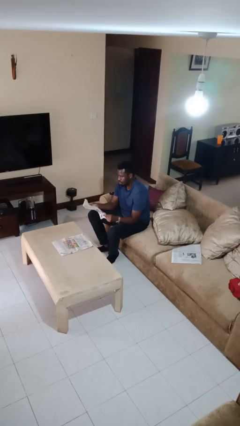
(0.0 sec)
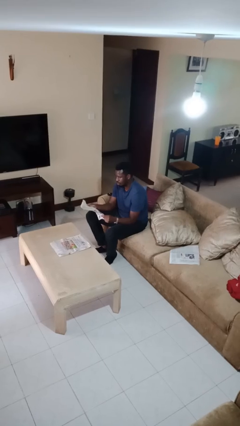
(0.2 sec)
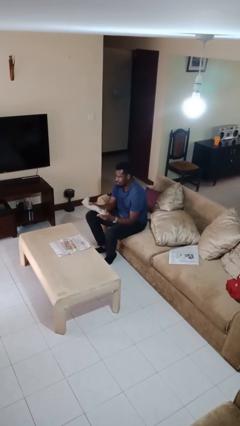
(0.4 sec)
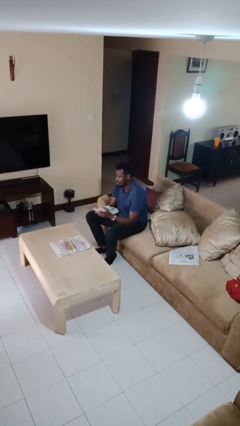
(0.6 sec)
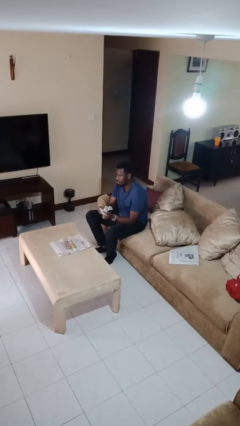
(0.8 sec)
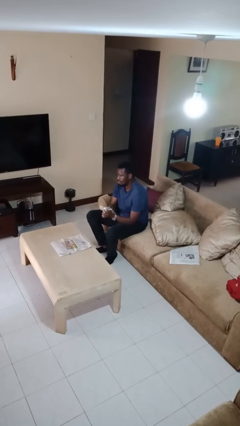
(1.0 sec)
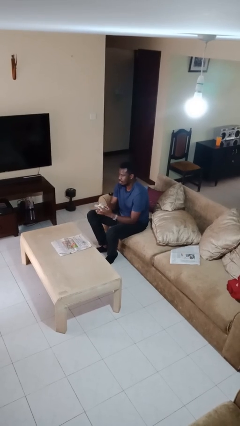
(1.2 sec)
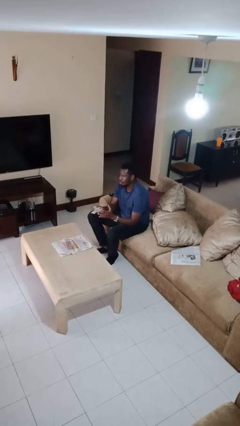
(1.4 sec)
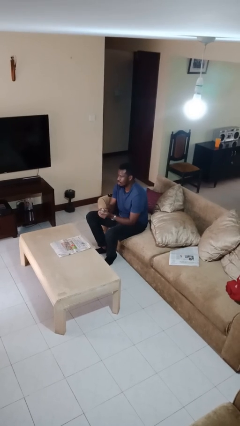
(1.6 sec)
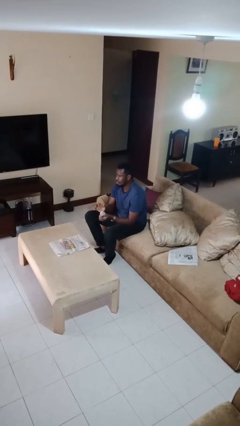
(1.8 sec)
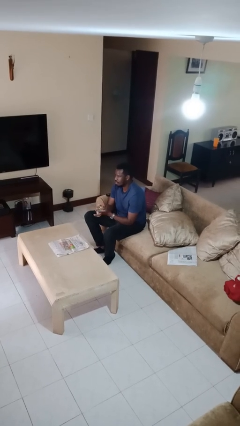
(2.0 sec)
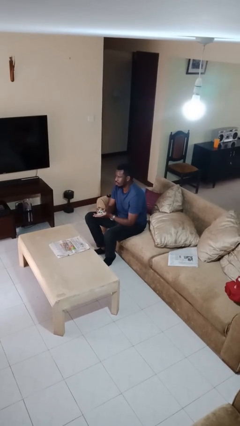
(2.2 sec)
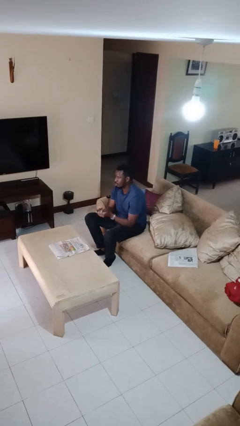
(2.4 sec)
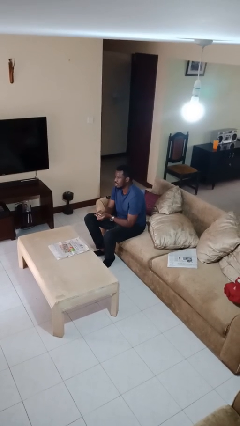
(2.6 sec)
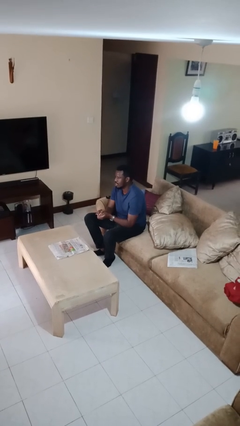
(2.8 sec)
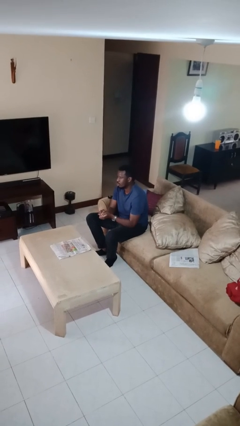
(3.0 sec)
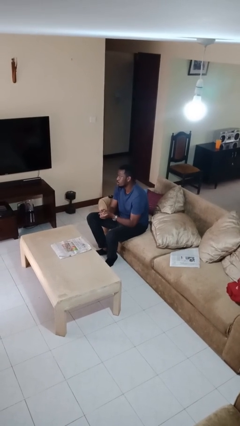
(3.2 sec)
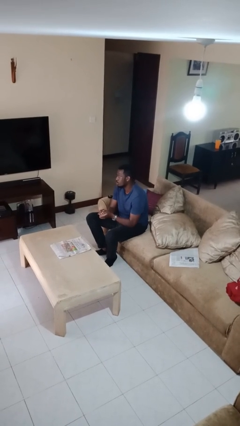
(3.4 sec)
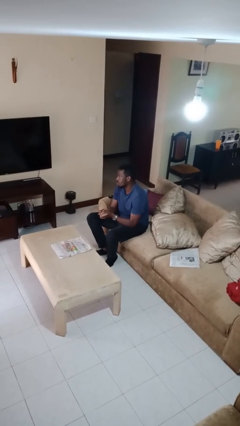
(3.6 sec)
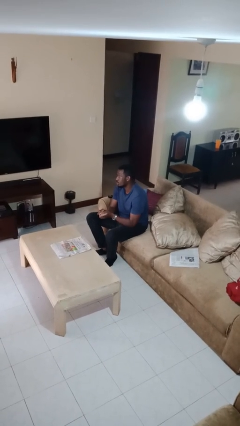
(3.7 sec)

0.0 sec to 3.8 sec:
person crumples paper

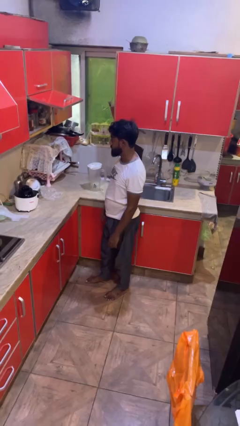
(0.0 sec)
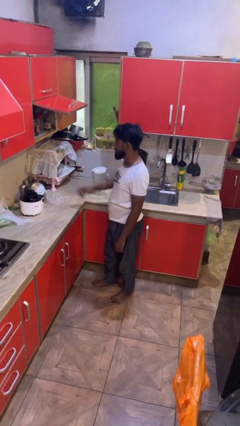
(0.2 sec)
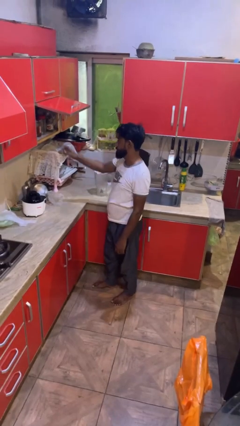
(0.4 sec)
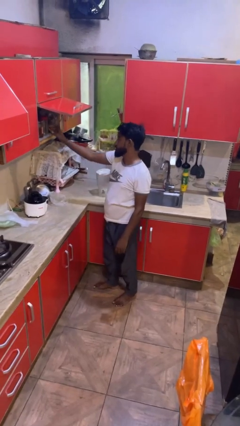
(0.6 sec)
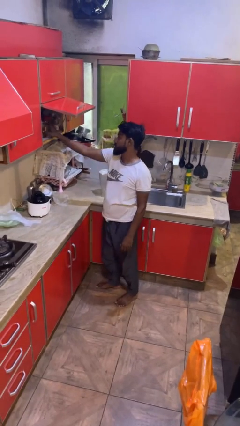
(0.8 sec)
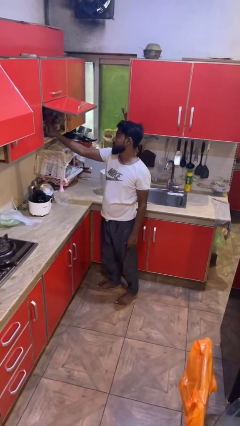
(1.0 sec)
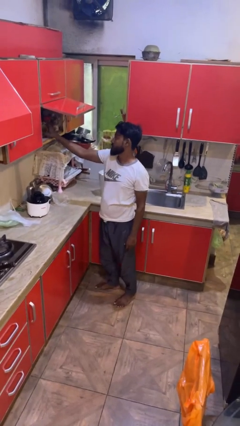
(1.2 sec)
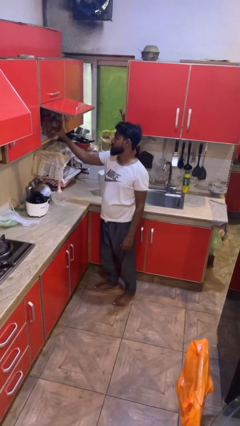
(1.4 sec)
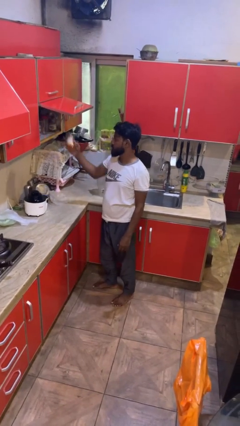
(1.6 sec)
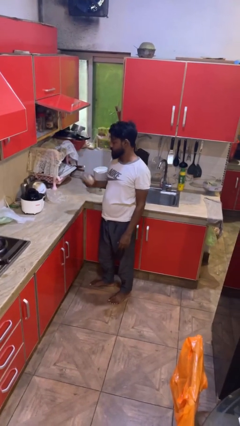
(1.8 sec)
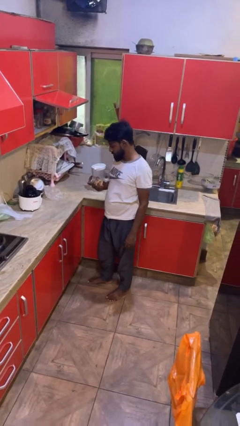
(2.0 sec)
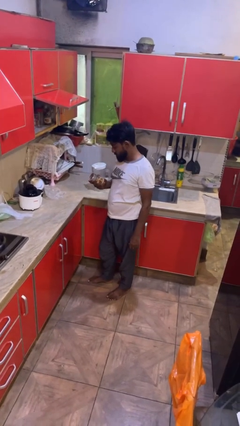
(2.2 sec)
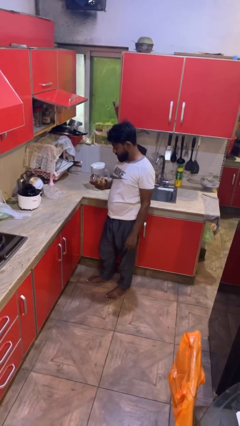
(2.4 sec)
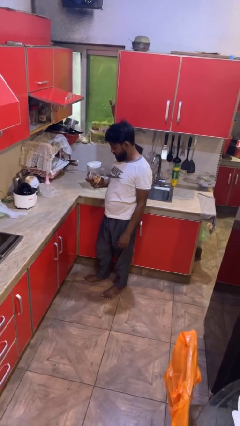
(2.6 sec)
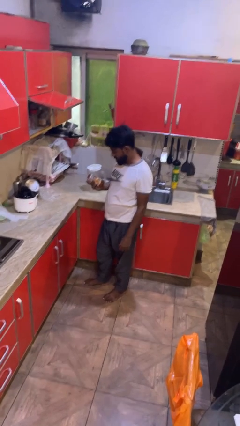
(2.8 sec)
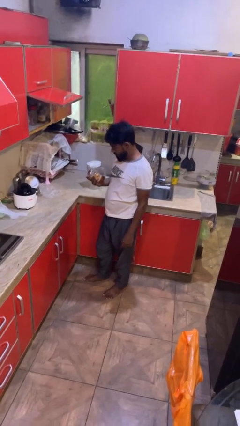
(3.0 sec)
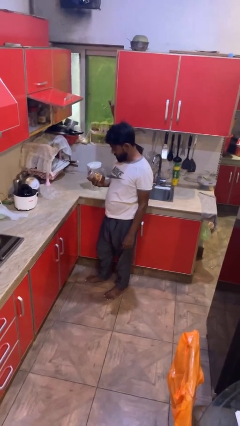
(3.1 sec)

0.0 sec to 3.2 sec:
person picks up object from cabinet

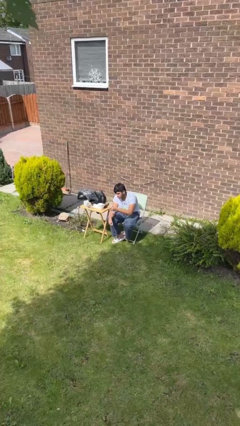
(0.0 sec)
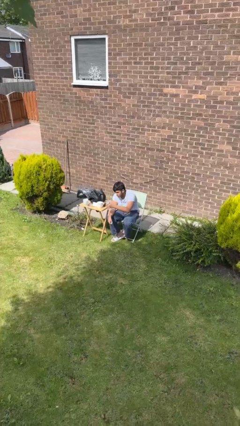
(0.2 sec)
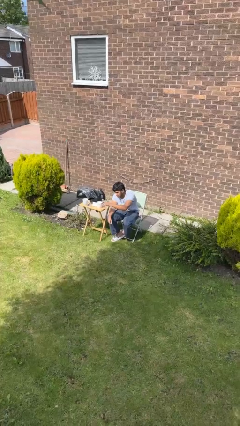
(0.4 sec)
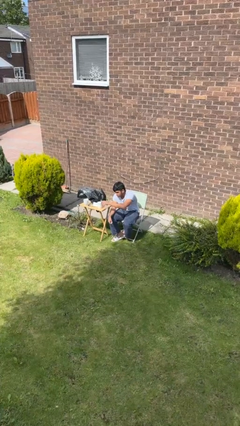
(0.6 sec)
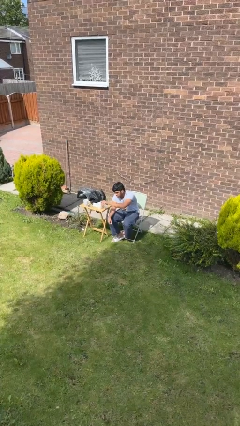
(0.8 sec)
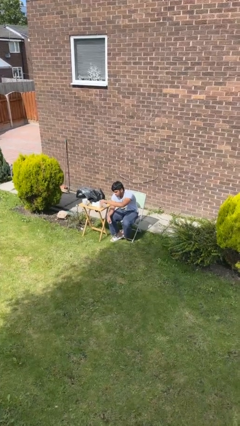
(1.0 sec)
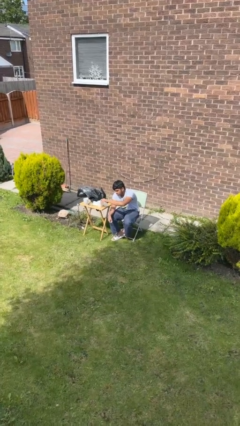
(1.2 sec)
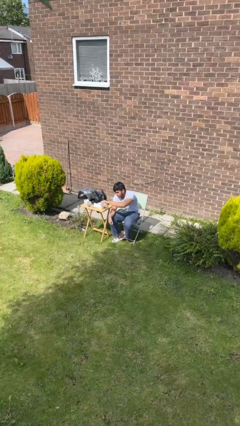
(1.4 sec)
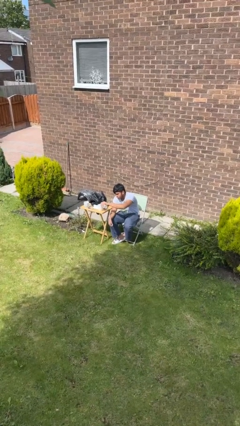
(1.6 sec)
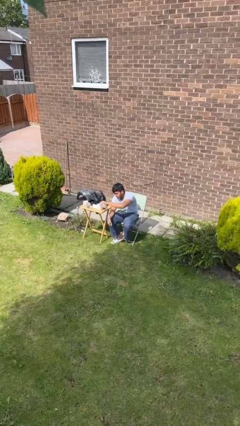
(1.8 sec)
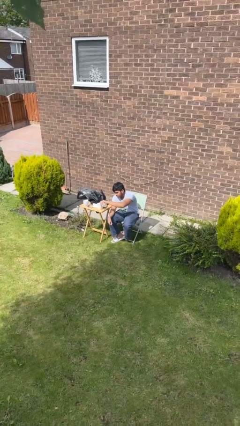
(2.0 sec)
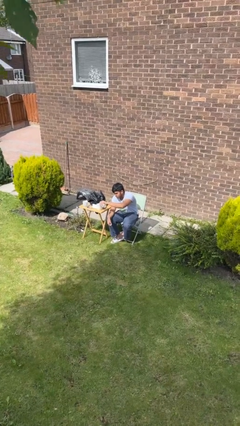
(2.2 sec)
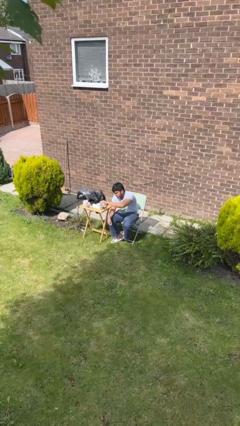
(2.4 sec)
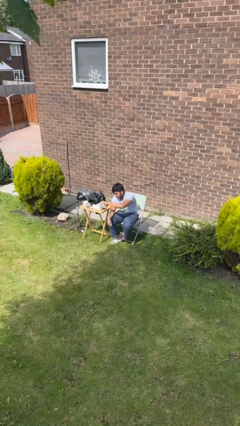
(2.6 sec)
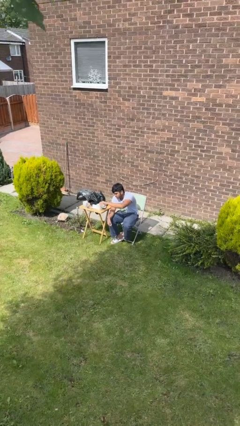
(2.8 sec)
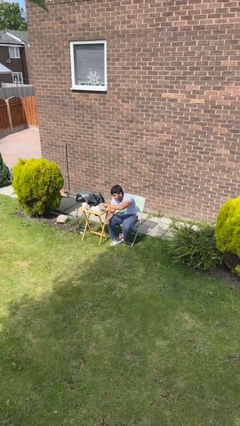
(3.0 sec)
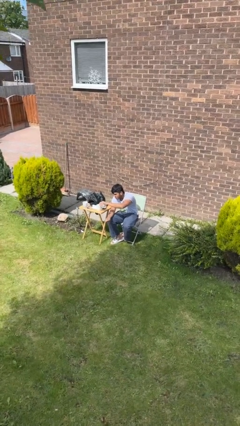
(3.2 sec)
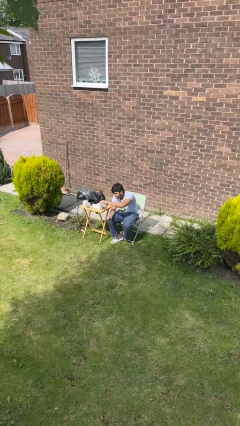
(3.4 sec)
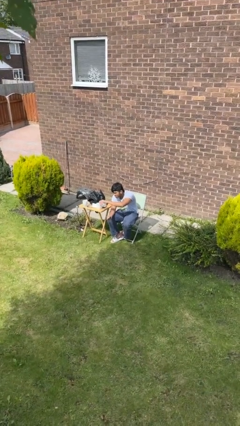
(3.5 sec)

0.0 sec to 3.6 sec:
person pours liquid into cup

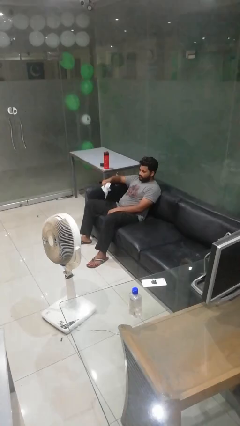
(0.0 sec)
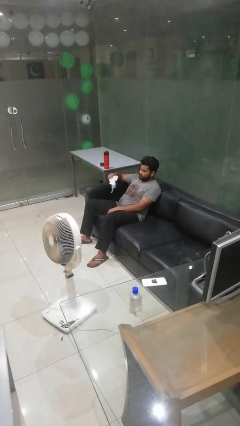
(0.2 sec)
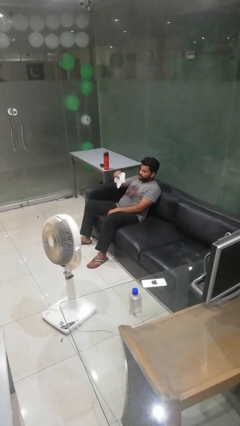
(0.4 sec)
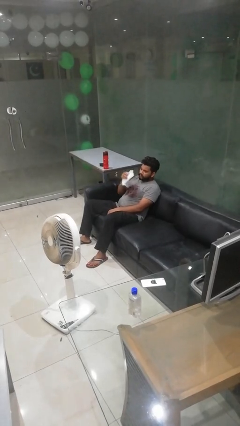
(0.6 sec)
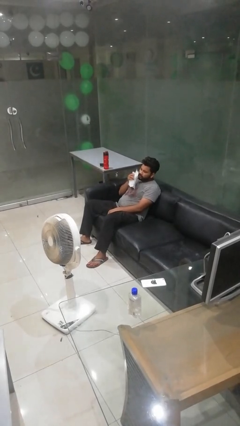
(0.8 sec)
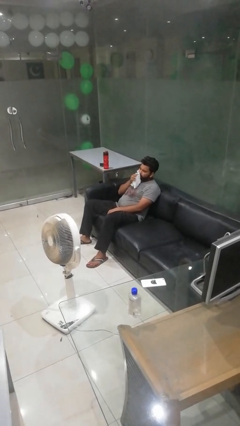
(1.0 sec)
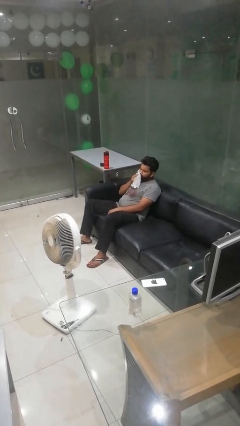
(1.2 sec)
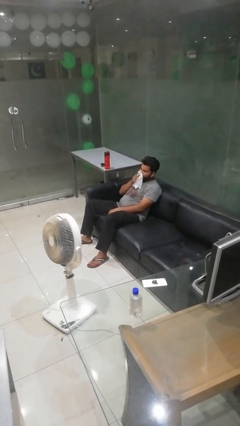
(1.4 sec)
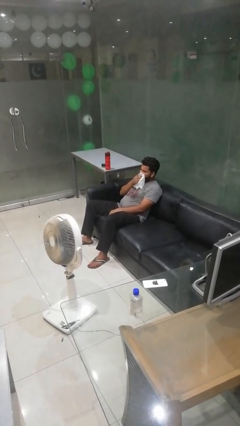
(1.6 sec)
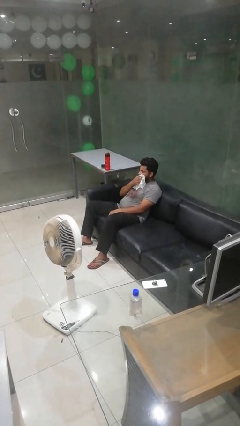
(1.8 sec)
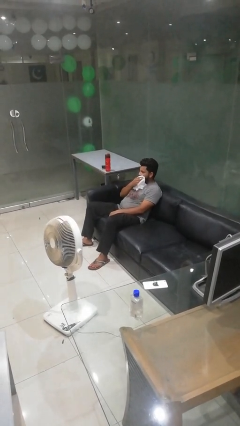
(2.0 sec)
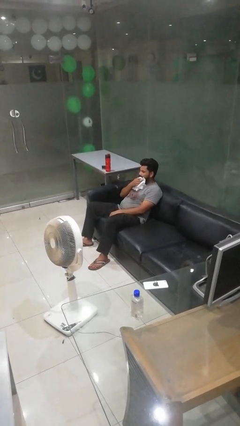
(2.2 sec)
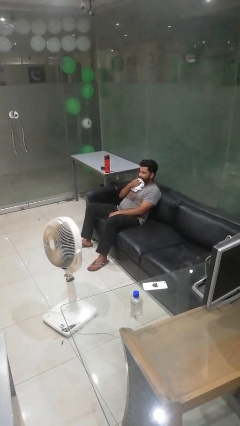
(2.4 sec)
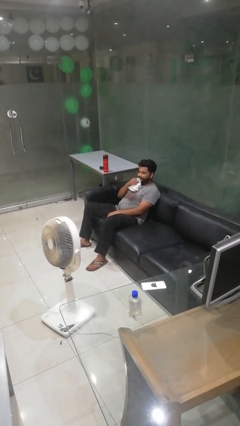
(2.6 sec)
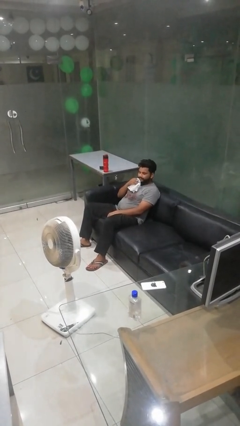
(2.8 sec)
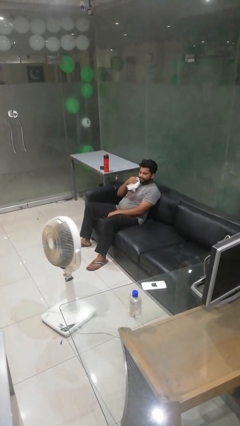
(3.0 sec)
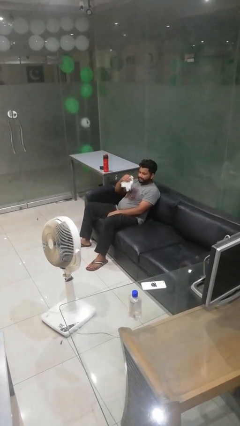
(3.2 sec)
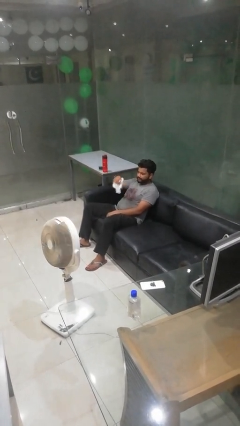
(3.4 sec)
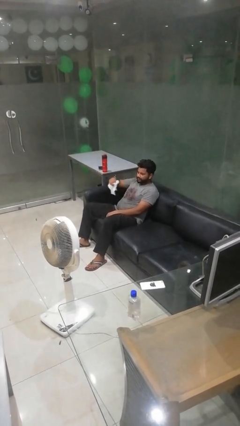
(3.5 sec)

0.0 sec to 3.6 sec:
person wipes mouth with napkin

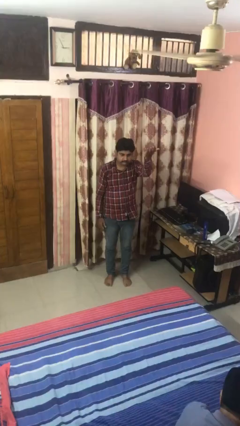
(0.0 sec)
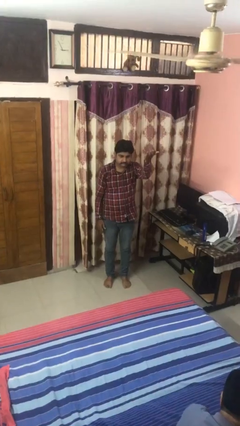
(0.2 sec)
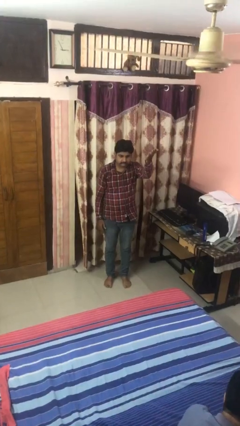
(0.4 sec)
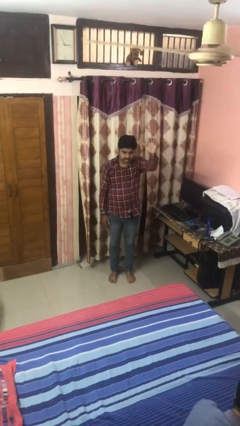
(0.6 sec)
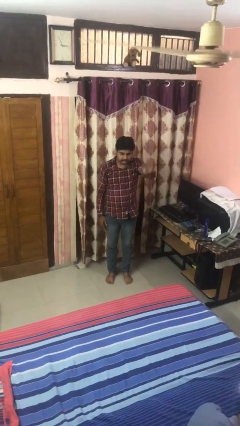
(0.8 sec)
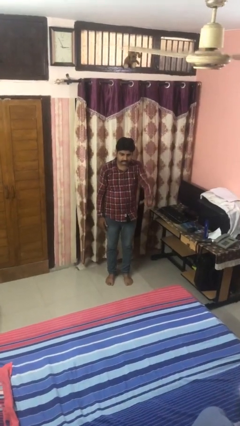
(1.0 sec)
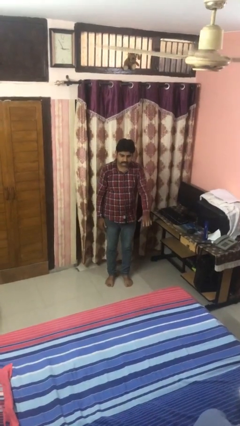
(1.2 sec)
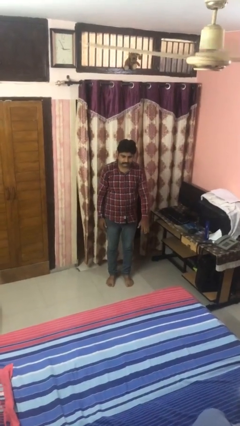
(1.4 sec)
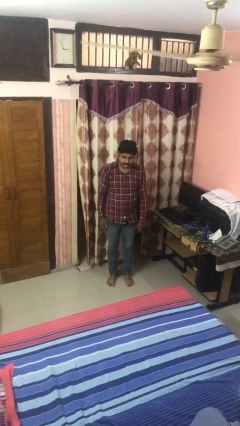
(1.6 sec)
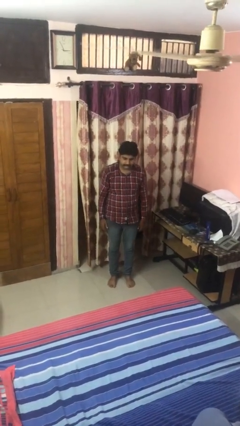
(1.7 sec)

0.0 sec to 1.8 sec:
person gestures swipe down

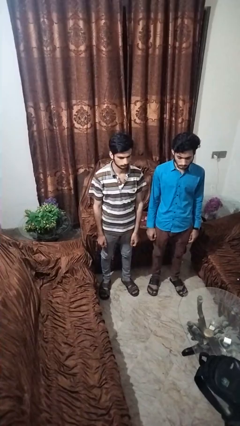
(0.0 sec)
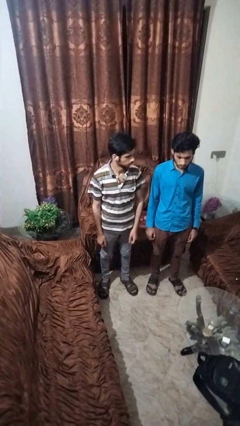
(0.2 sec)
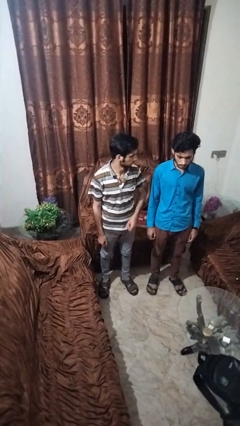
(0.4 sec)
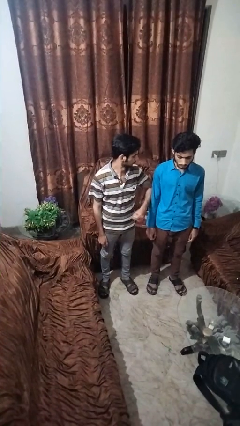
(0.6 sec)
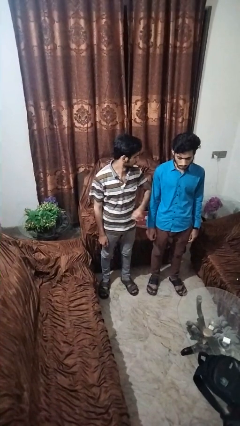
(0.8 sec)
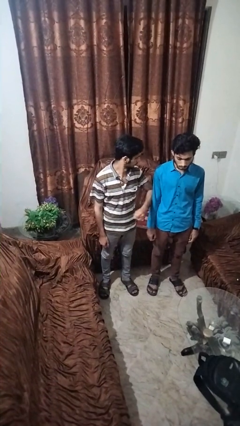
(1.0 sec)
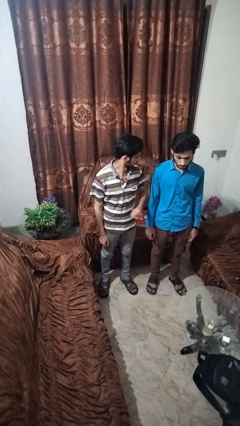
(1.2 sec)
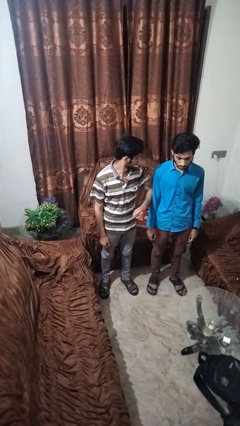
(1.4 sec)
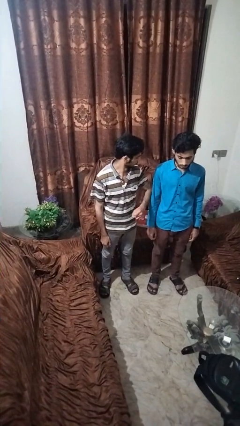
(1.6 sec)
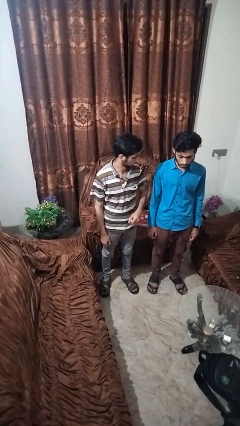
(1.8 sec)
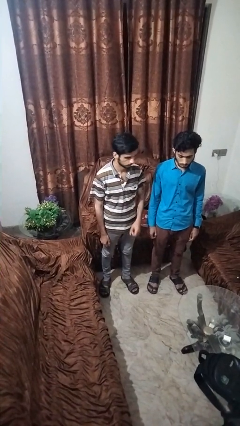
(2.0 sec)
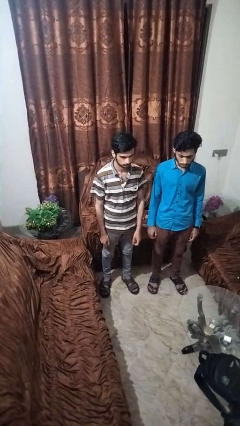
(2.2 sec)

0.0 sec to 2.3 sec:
person nudges person with elbow
